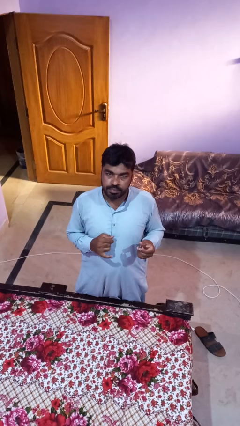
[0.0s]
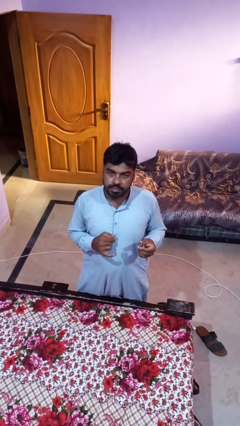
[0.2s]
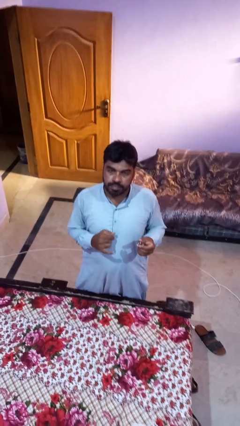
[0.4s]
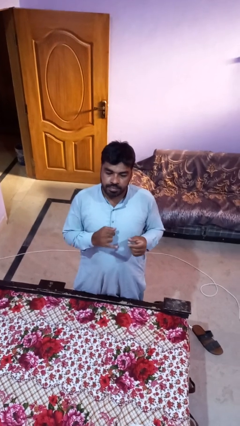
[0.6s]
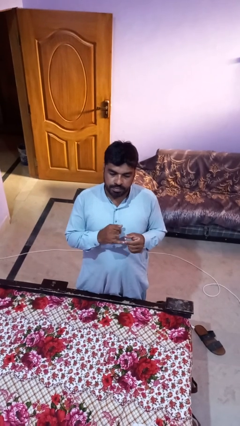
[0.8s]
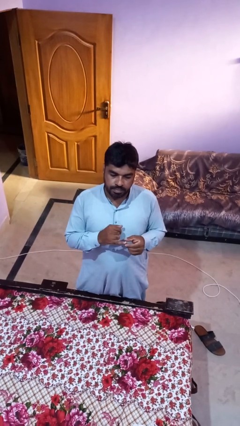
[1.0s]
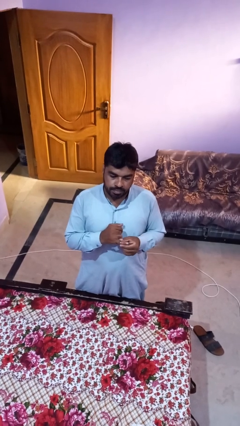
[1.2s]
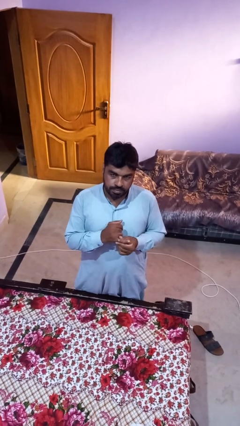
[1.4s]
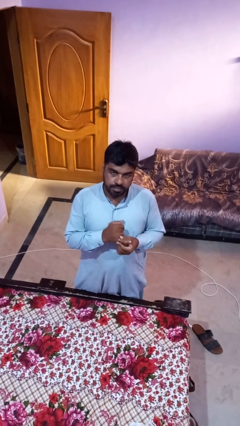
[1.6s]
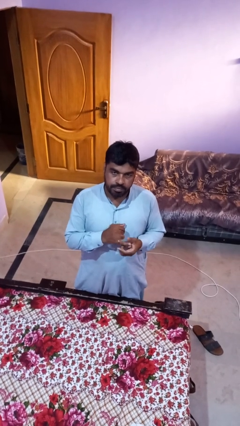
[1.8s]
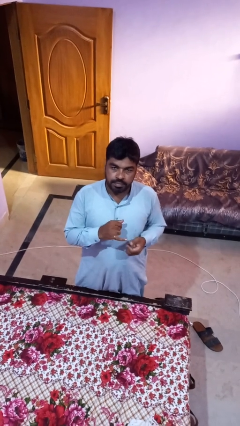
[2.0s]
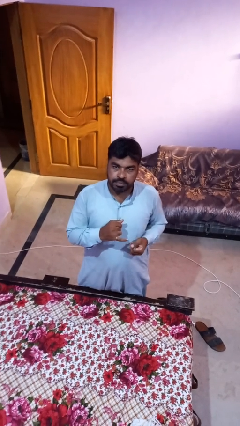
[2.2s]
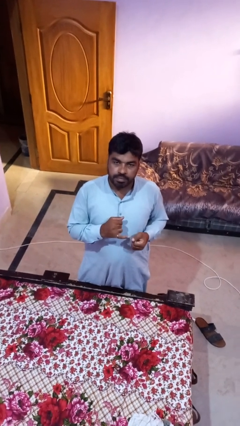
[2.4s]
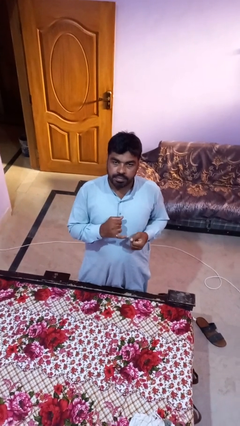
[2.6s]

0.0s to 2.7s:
person puts on ring

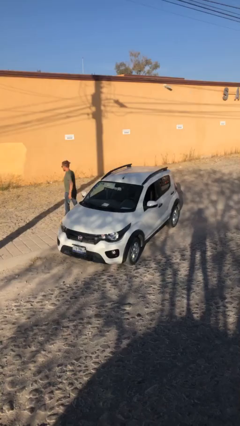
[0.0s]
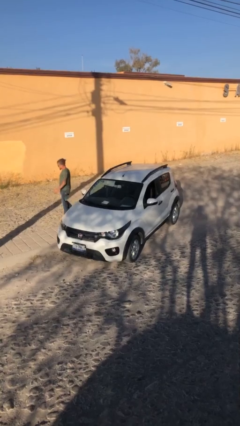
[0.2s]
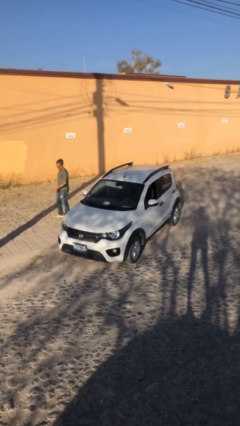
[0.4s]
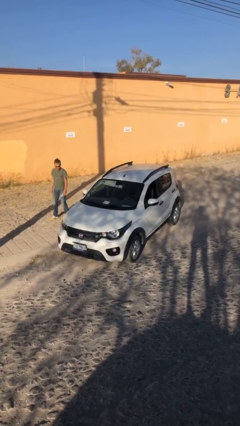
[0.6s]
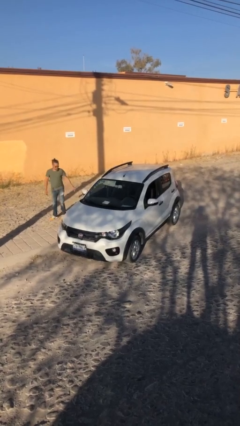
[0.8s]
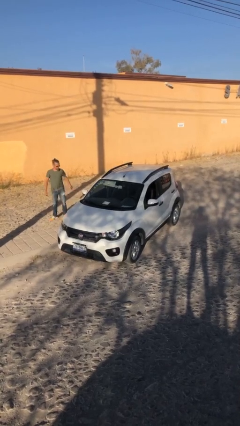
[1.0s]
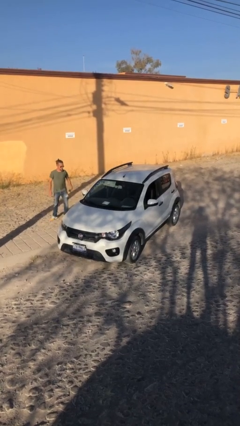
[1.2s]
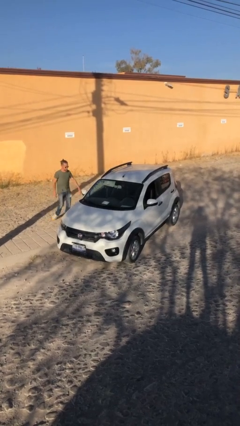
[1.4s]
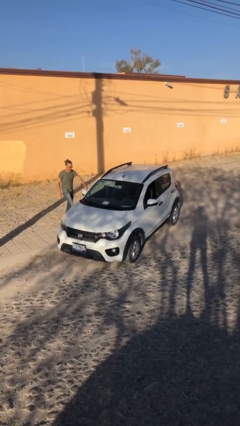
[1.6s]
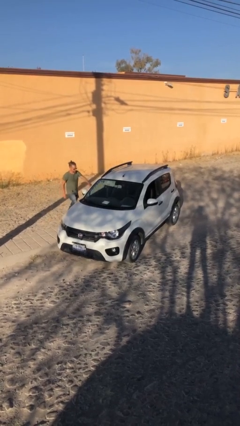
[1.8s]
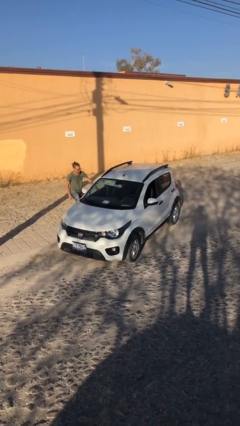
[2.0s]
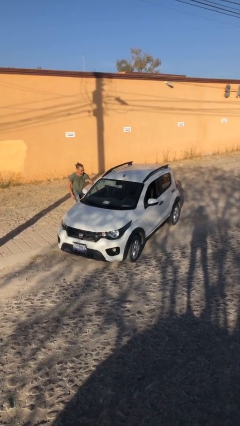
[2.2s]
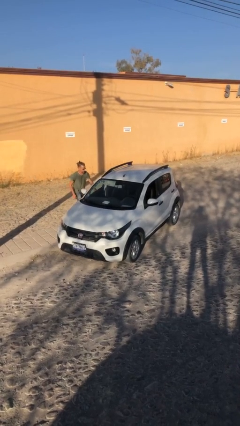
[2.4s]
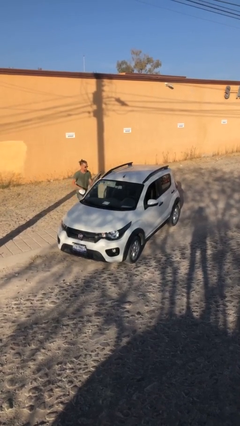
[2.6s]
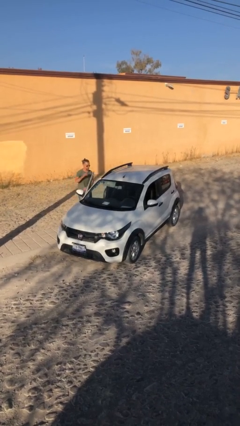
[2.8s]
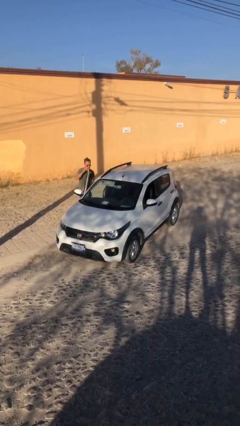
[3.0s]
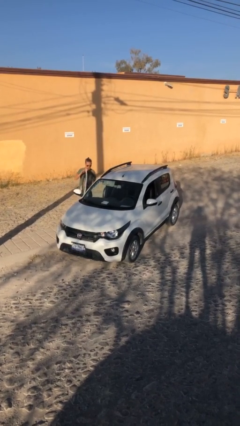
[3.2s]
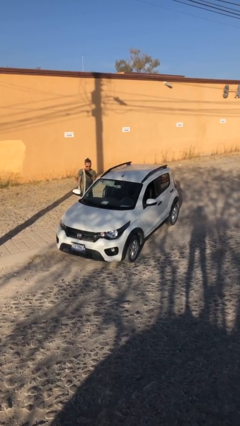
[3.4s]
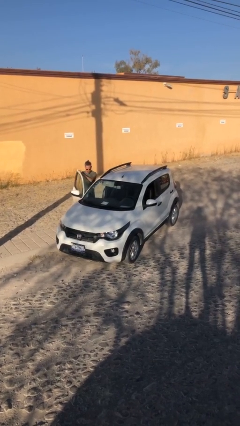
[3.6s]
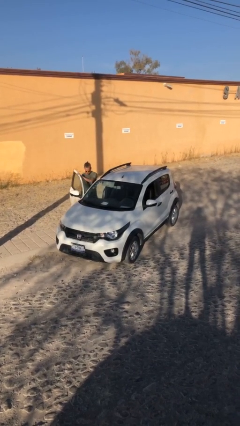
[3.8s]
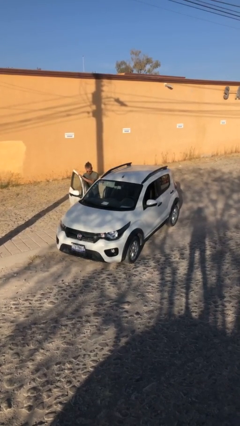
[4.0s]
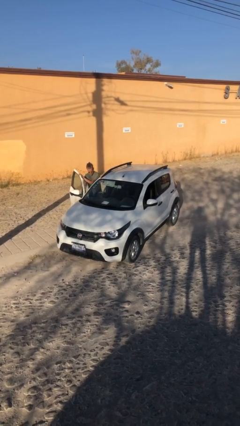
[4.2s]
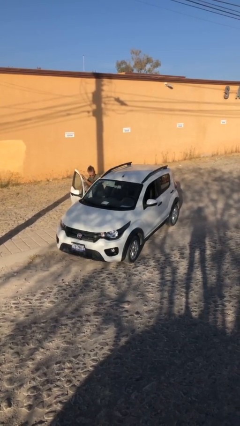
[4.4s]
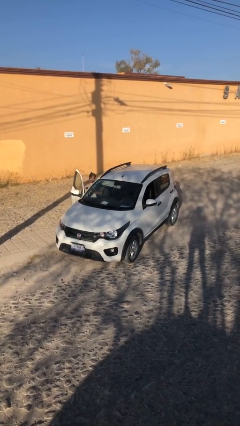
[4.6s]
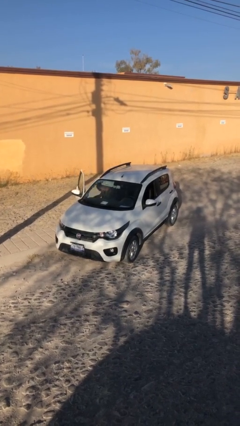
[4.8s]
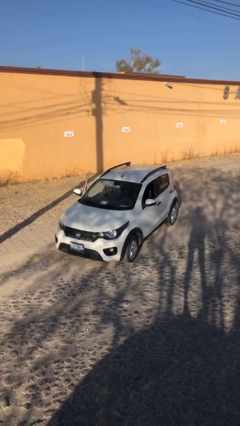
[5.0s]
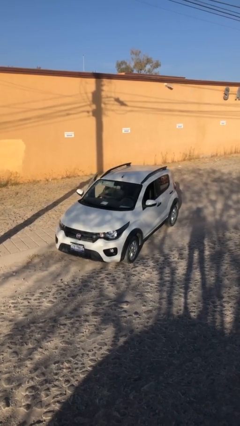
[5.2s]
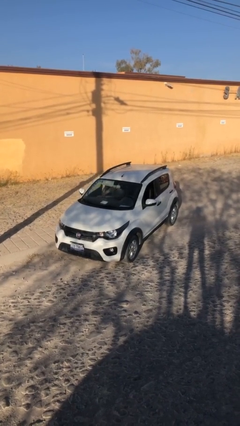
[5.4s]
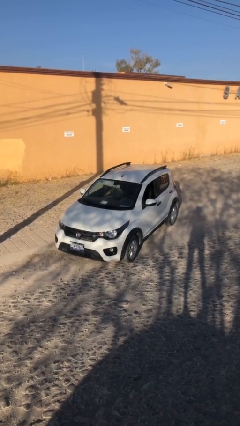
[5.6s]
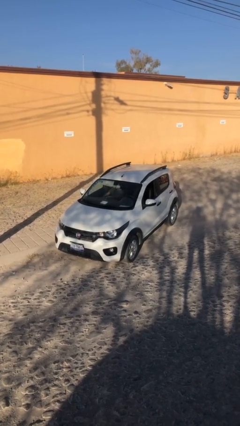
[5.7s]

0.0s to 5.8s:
car picks up person

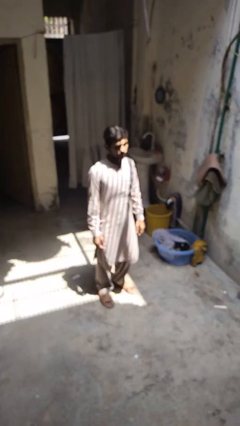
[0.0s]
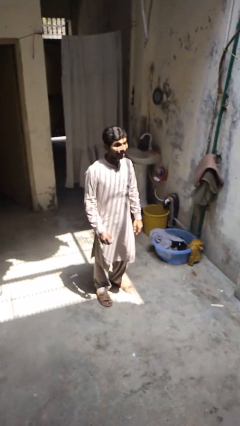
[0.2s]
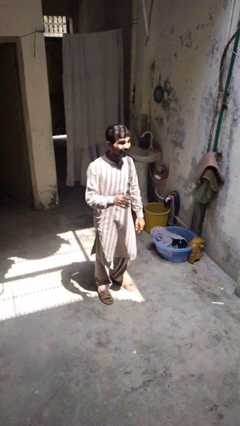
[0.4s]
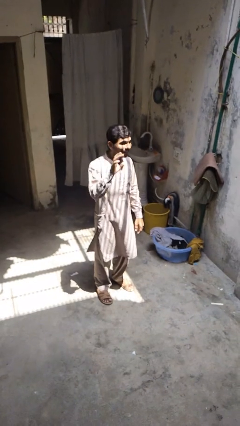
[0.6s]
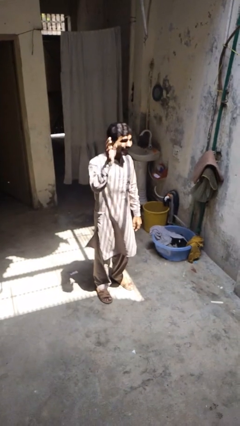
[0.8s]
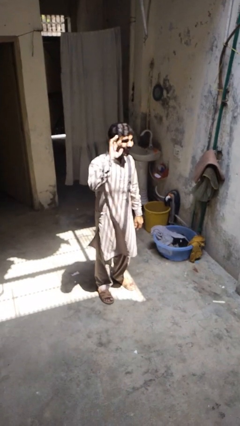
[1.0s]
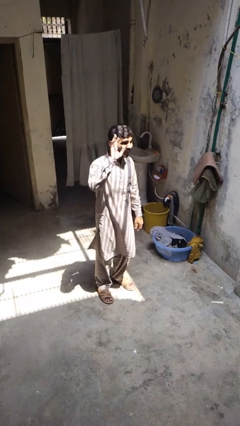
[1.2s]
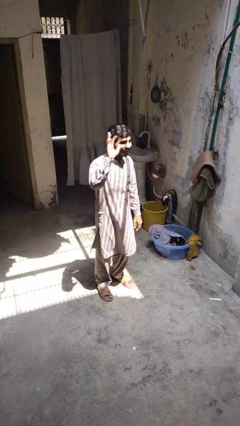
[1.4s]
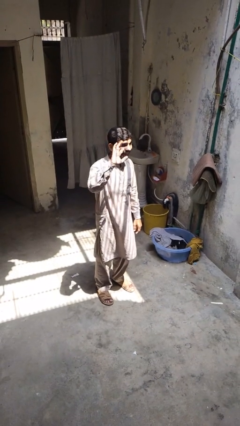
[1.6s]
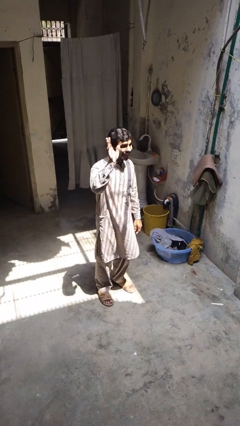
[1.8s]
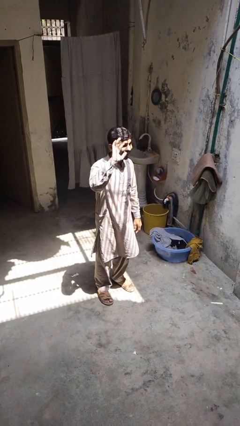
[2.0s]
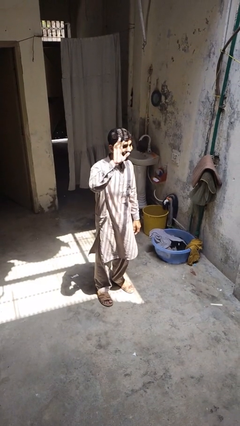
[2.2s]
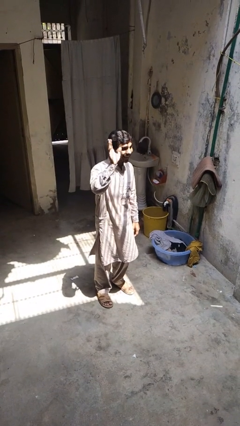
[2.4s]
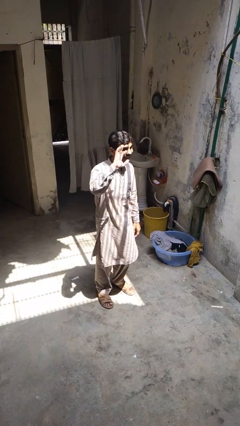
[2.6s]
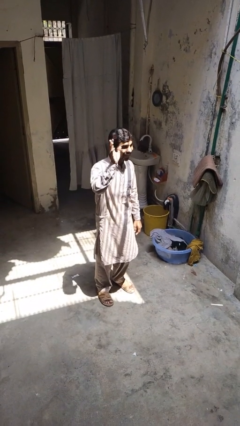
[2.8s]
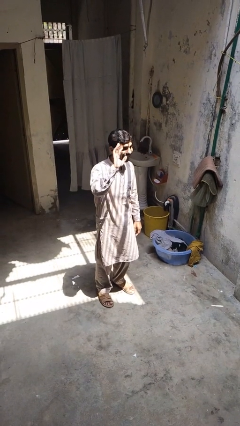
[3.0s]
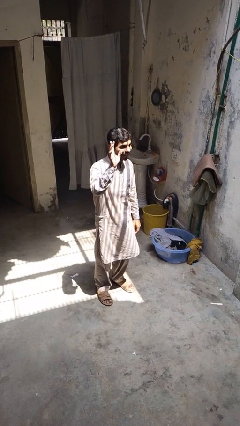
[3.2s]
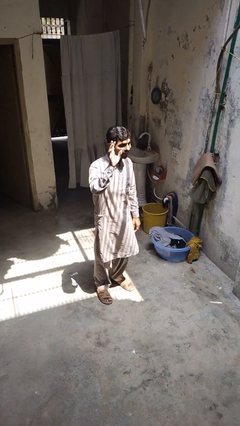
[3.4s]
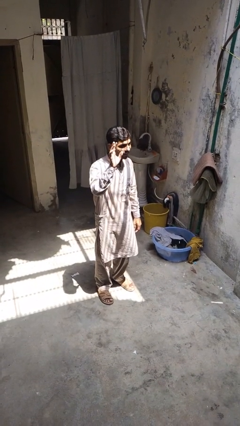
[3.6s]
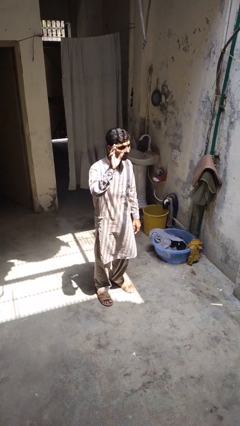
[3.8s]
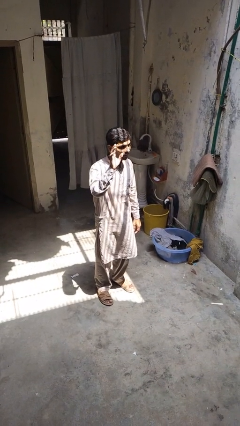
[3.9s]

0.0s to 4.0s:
person waves at person

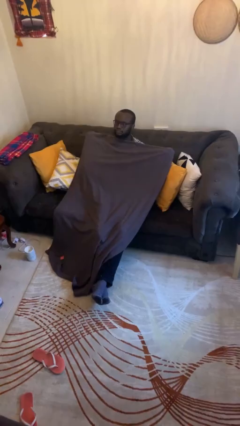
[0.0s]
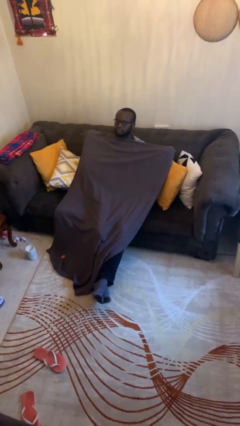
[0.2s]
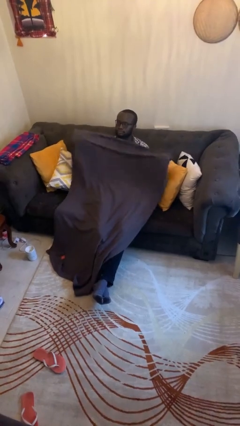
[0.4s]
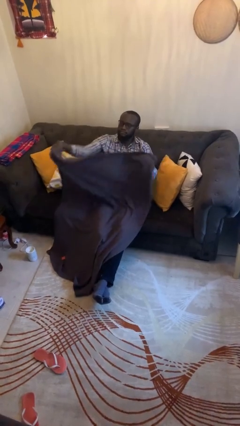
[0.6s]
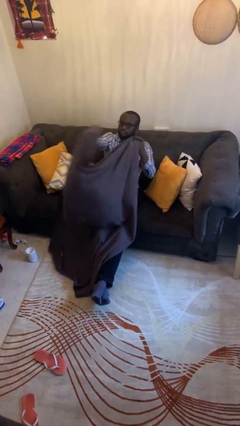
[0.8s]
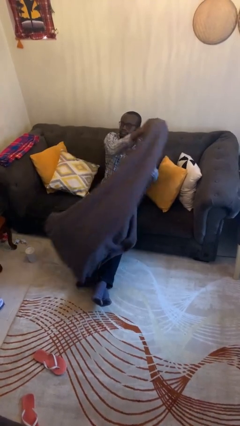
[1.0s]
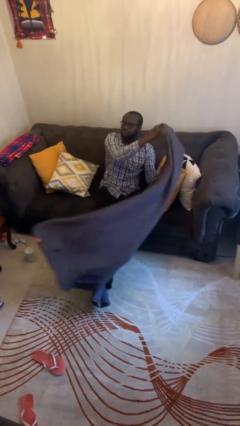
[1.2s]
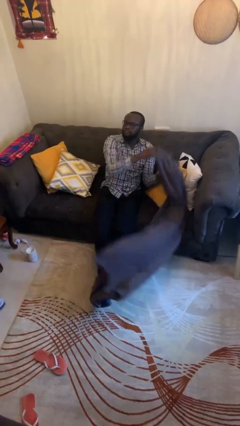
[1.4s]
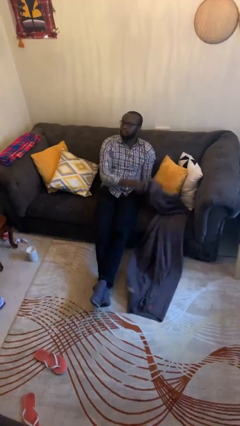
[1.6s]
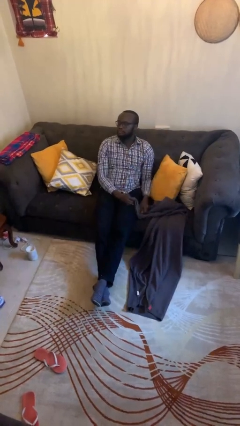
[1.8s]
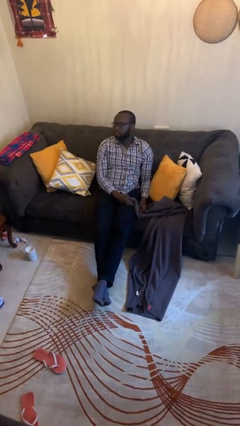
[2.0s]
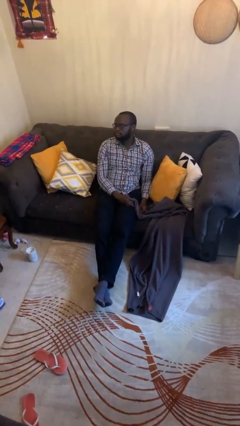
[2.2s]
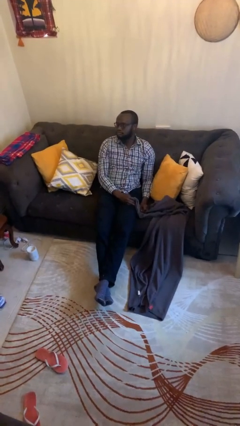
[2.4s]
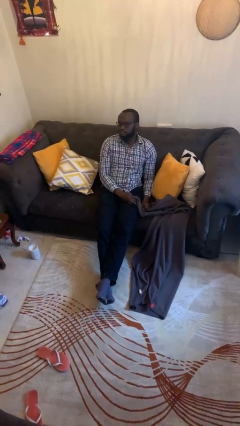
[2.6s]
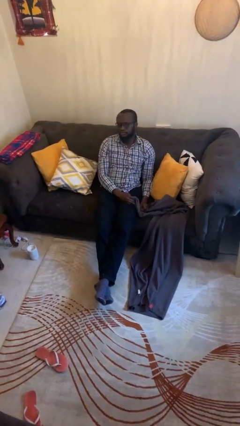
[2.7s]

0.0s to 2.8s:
person uncovers with blanket

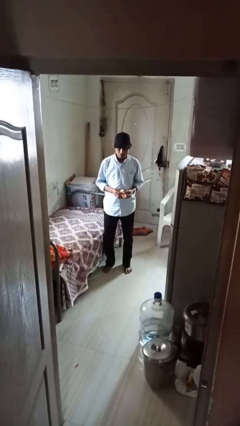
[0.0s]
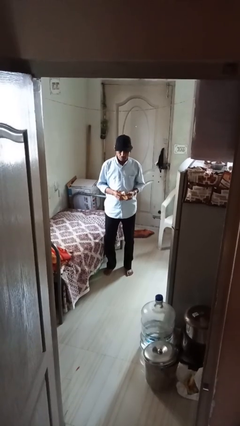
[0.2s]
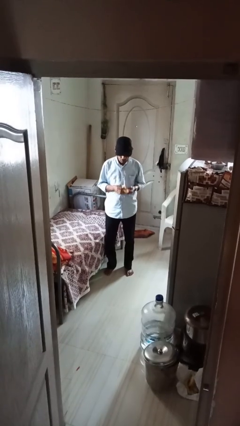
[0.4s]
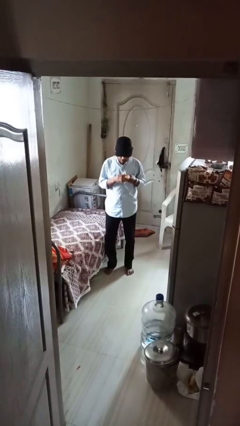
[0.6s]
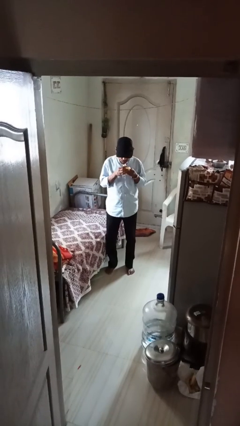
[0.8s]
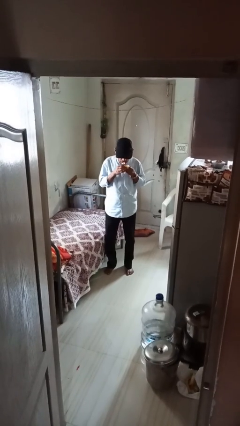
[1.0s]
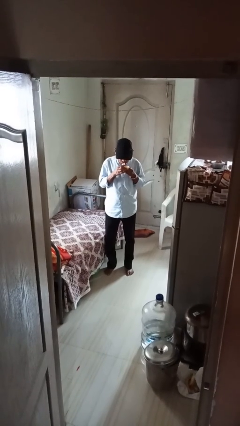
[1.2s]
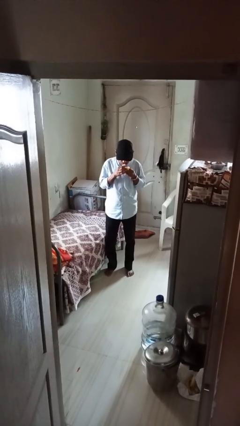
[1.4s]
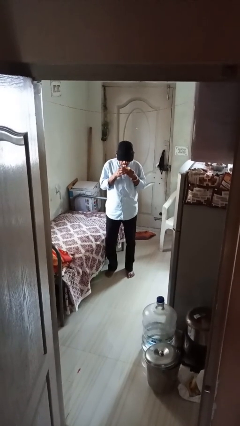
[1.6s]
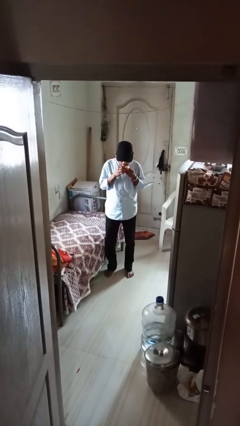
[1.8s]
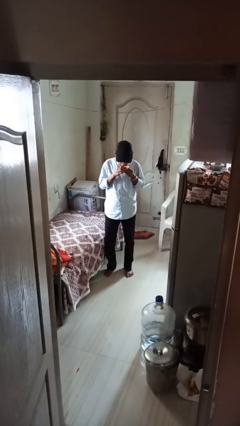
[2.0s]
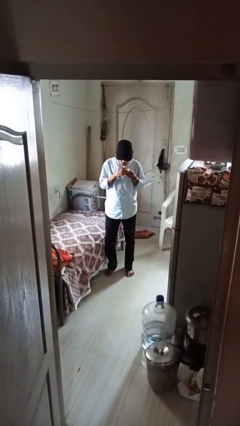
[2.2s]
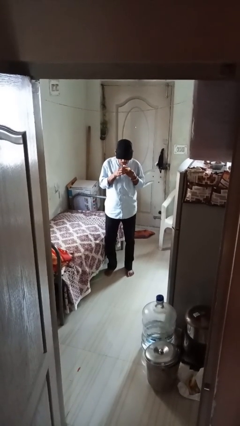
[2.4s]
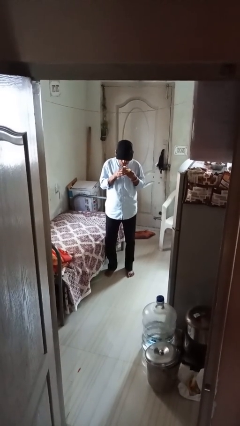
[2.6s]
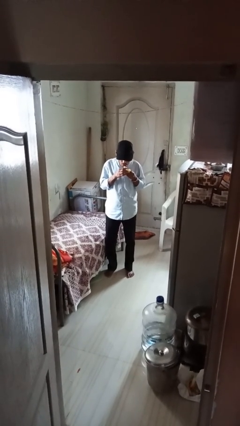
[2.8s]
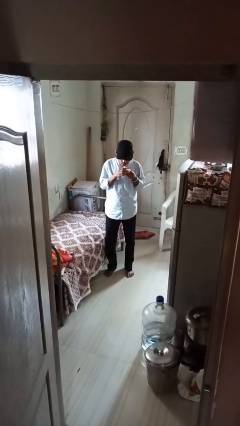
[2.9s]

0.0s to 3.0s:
person eats banana
